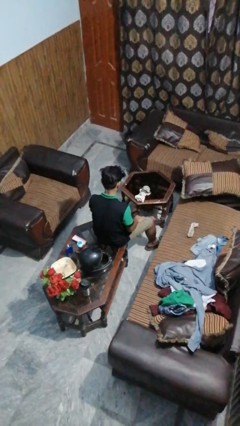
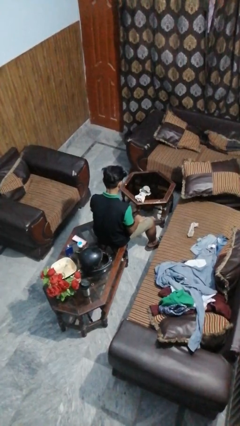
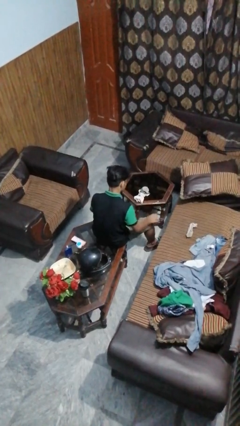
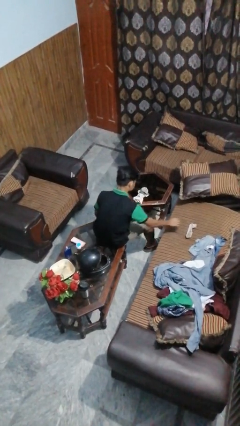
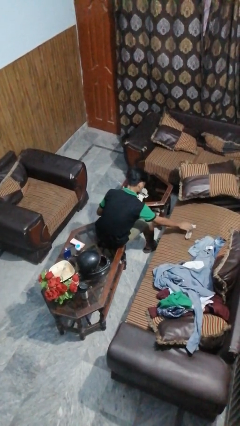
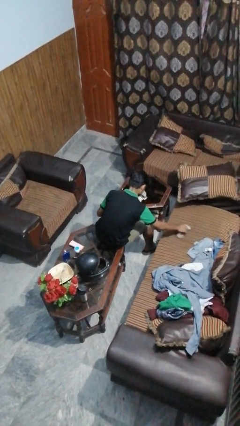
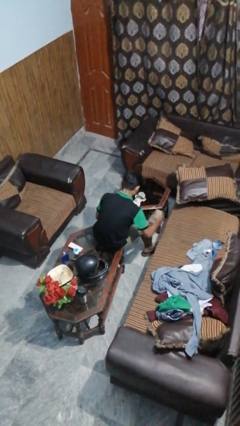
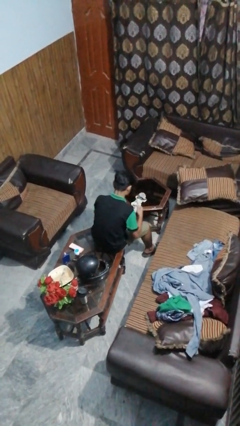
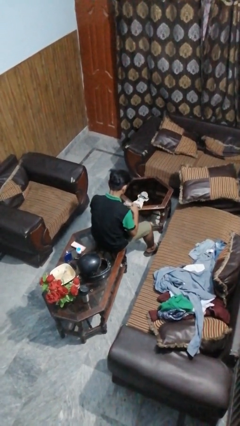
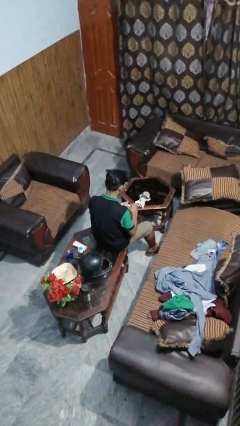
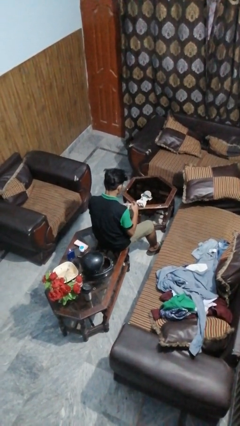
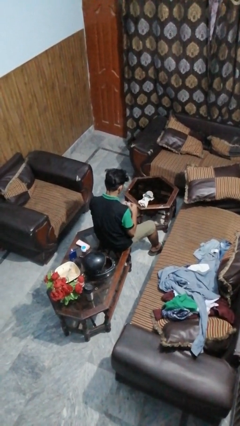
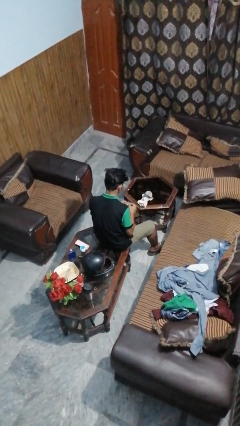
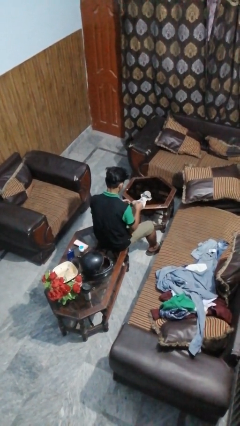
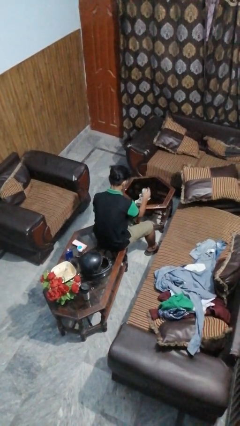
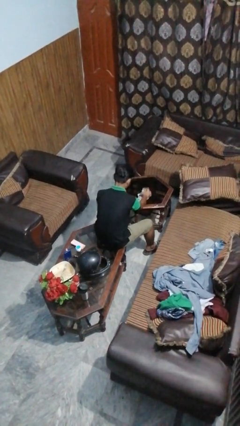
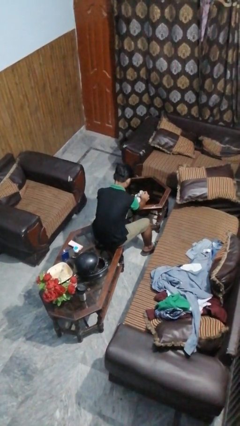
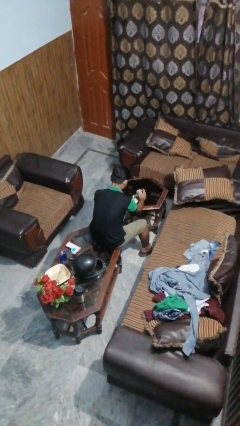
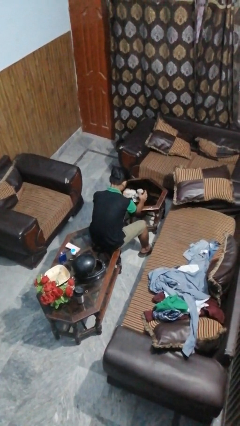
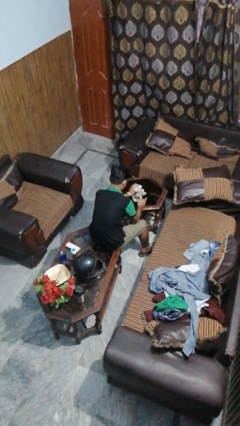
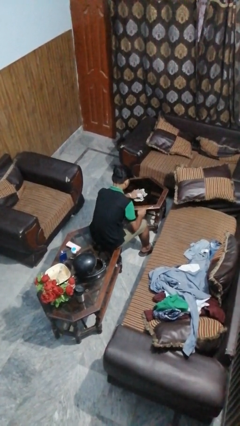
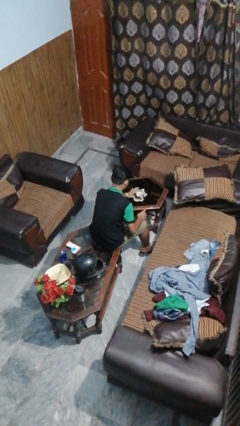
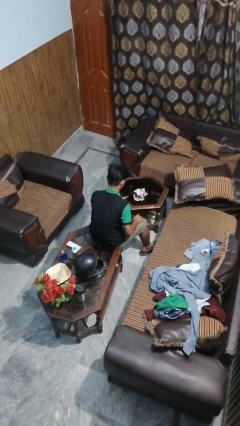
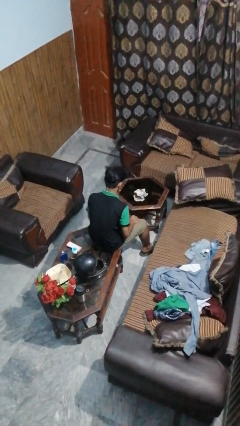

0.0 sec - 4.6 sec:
person folds socks

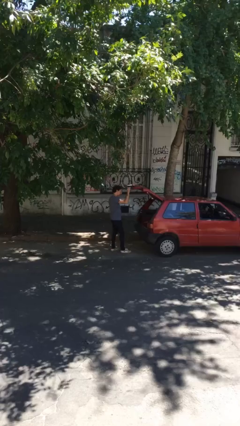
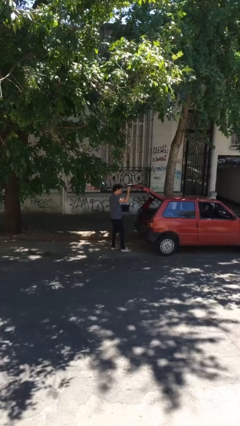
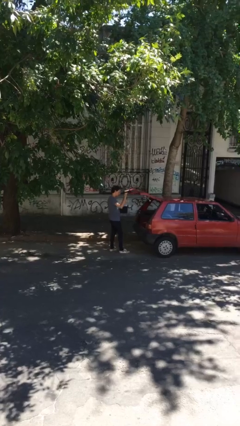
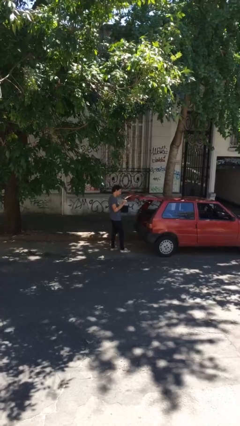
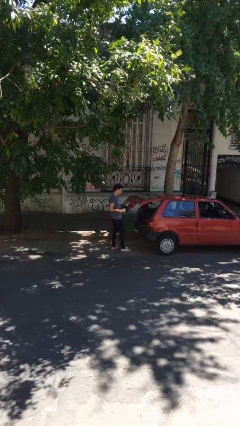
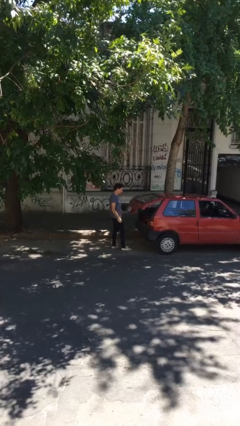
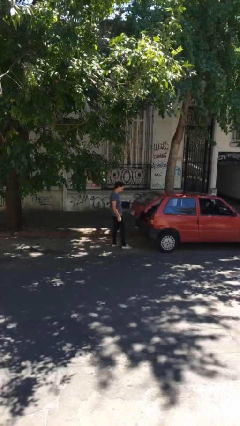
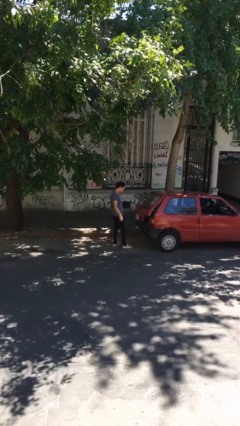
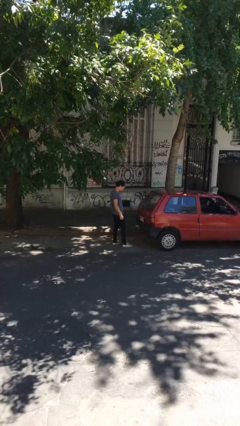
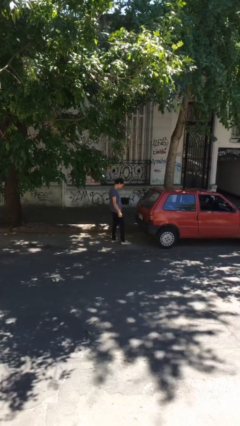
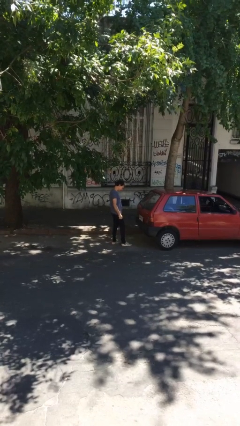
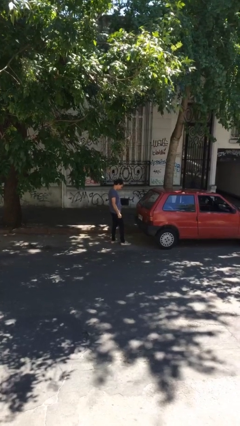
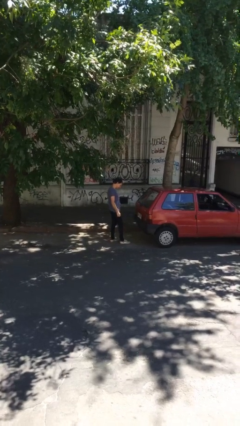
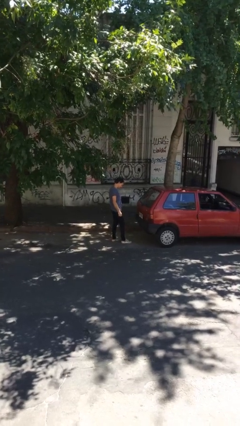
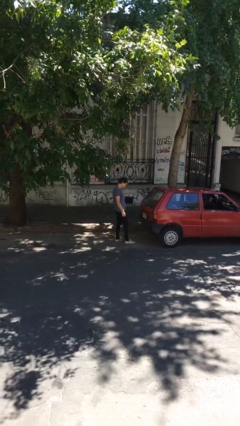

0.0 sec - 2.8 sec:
person closes car trunk

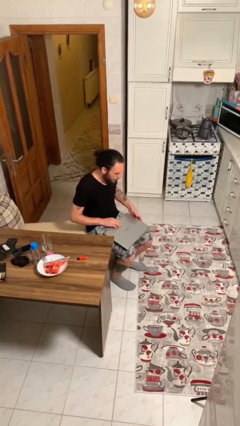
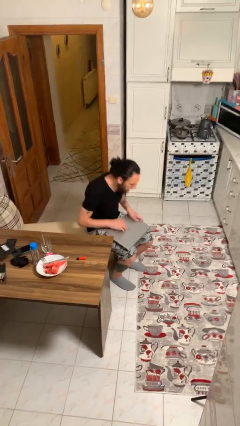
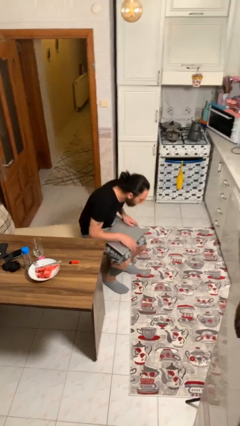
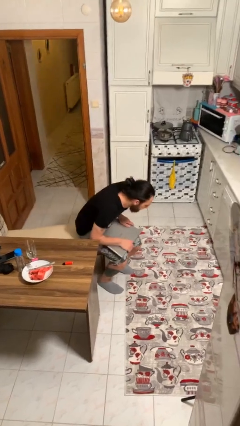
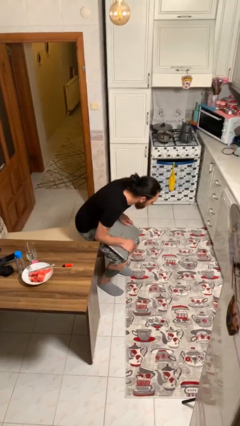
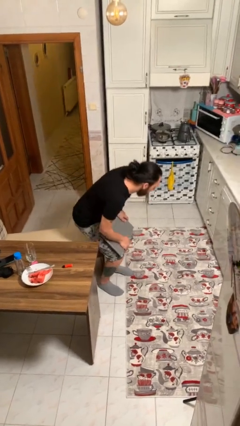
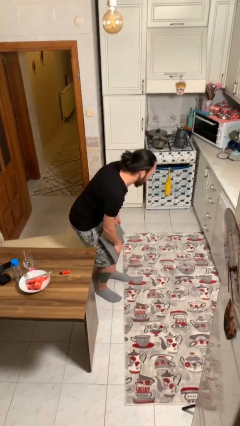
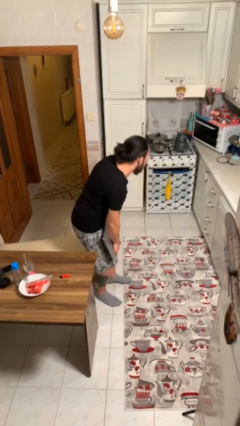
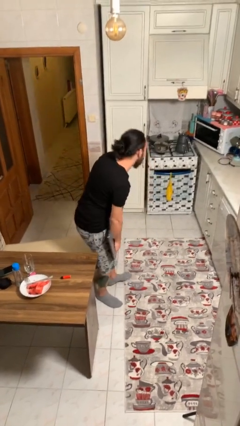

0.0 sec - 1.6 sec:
person stands up

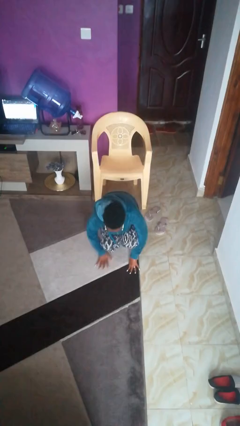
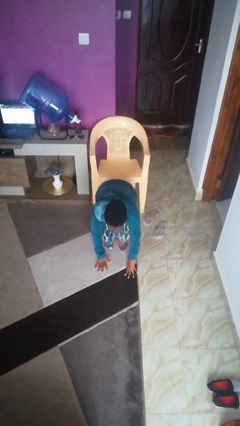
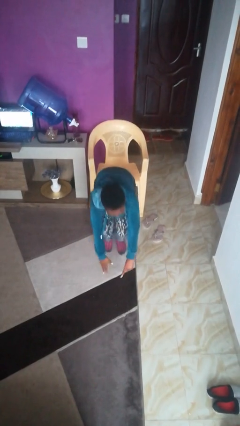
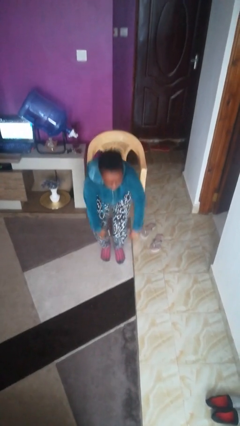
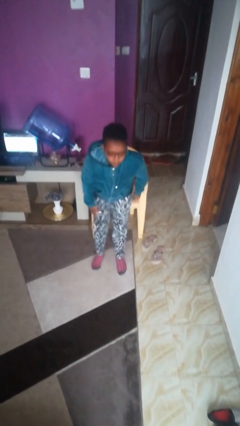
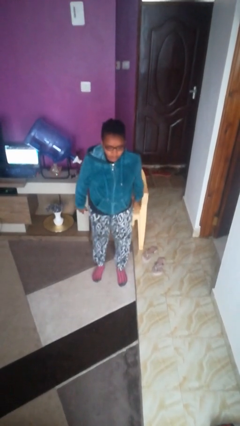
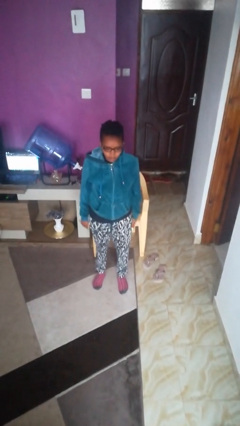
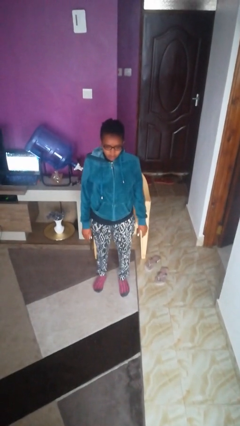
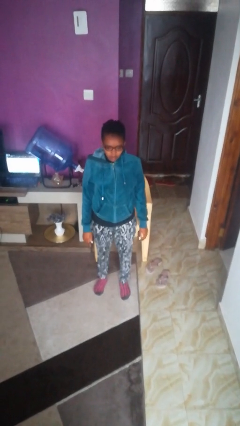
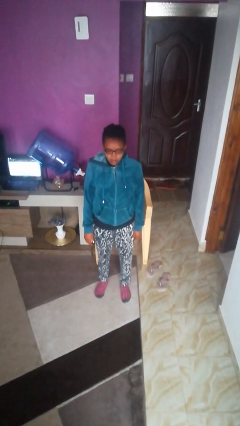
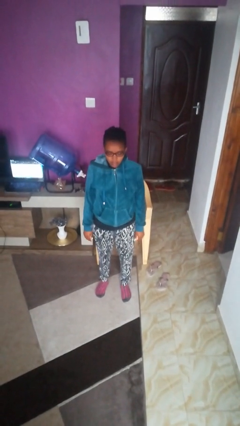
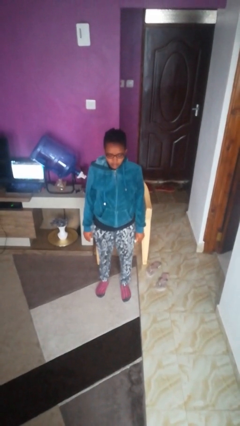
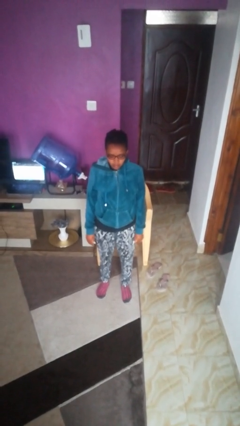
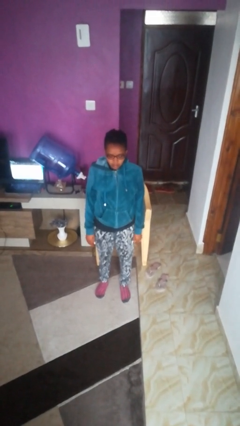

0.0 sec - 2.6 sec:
person stands up from floor

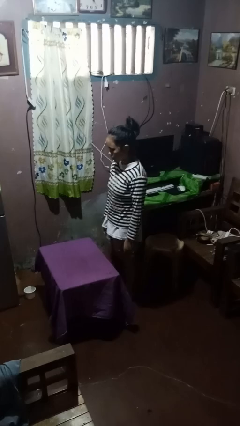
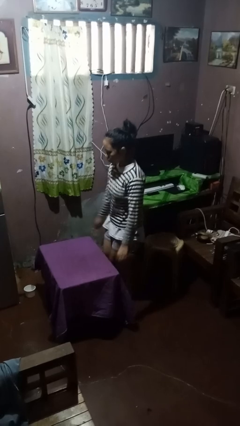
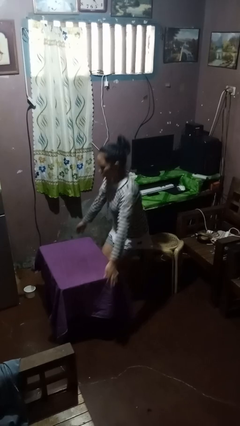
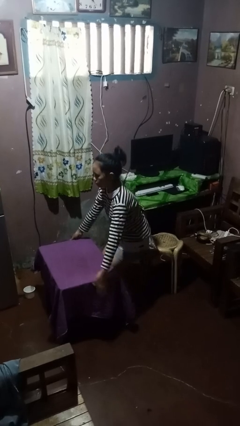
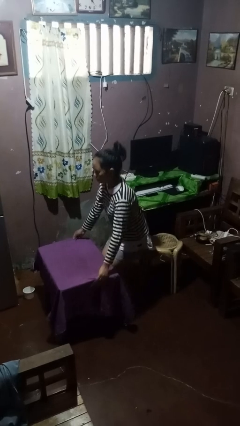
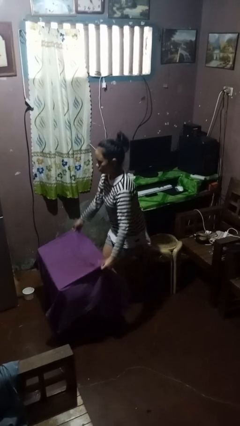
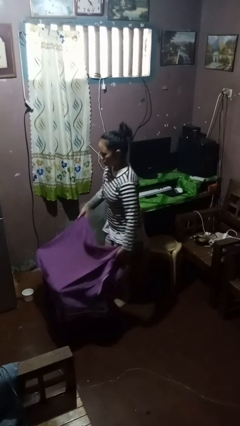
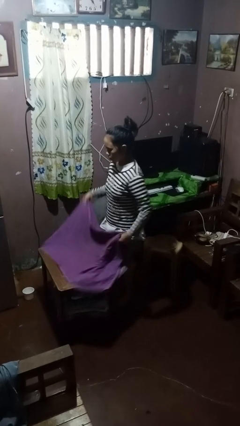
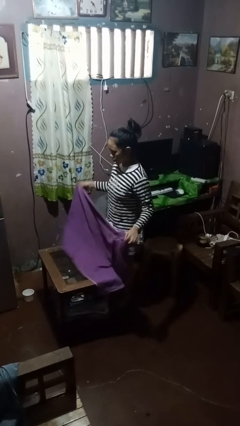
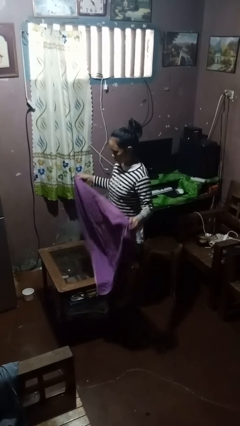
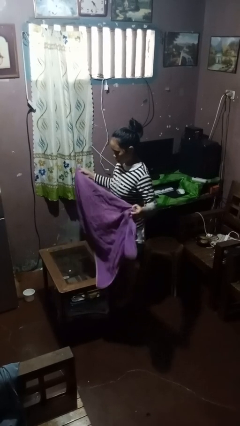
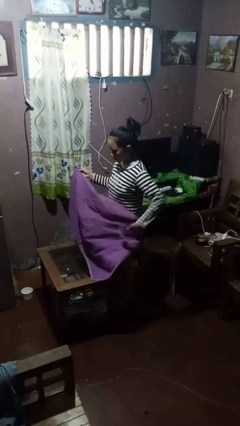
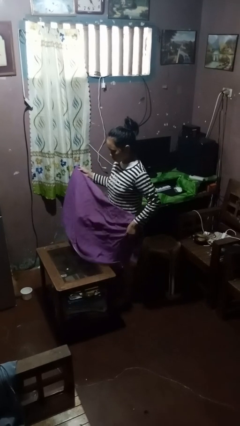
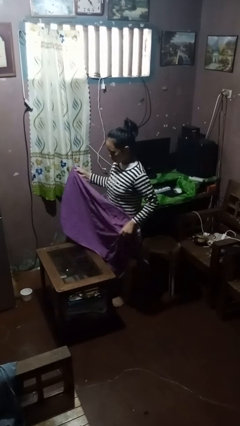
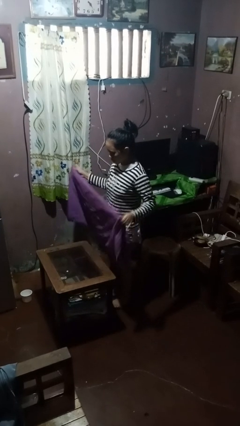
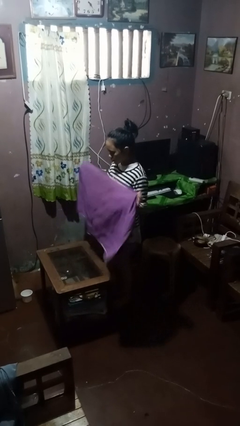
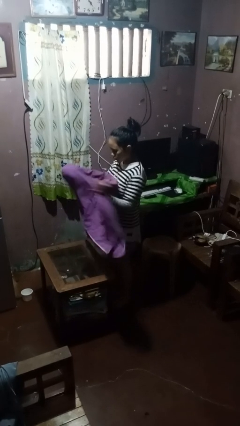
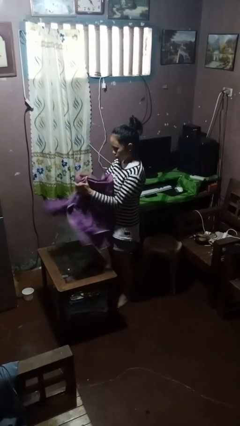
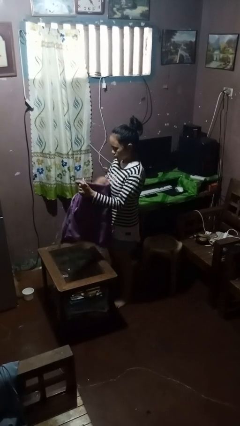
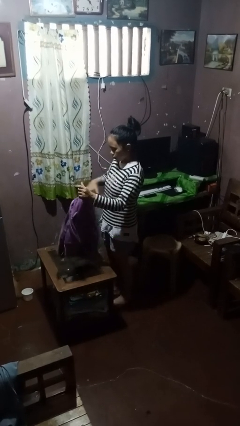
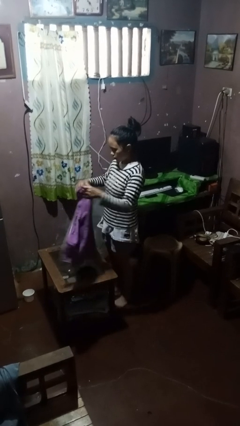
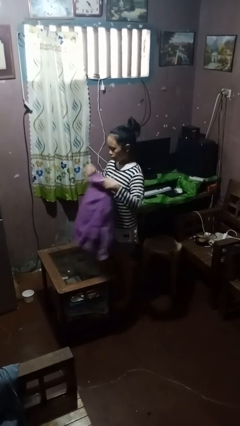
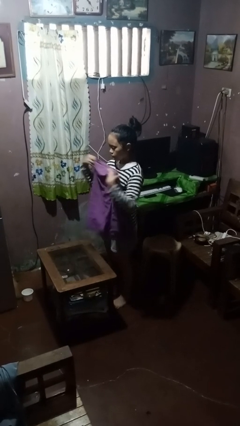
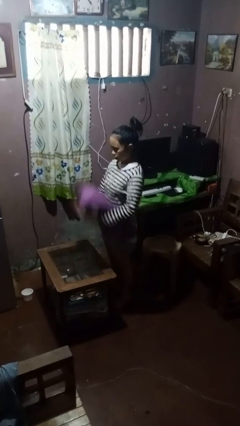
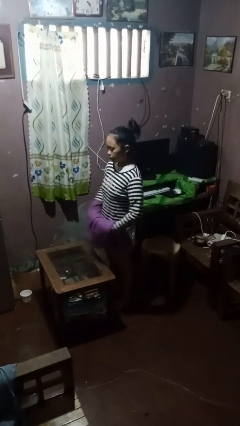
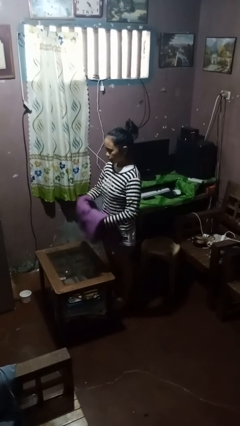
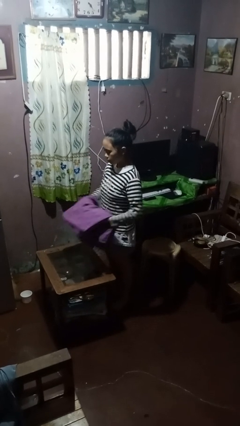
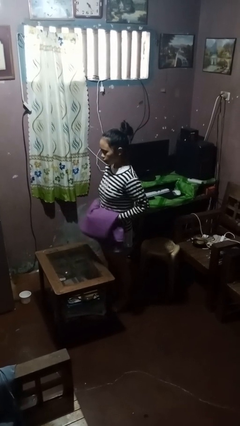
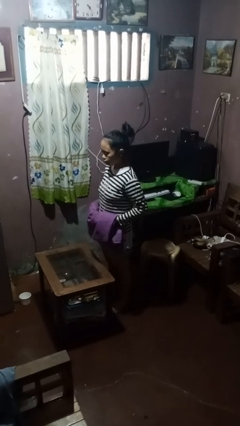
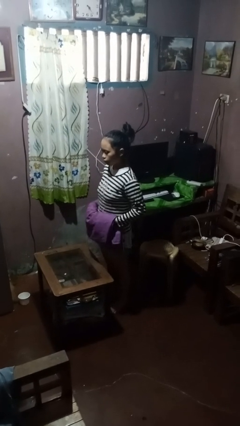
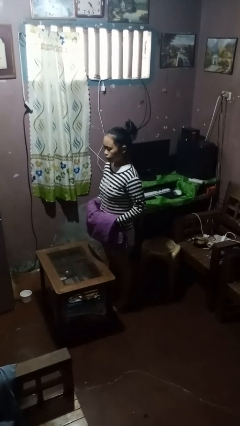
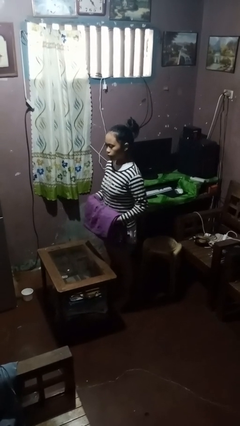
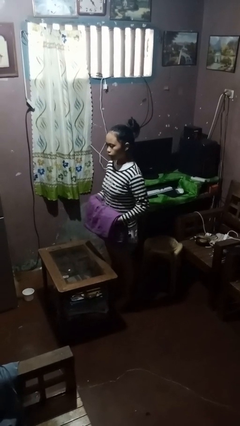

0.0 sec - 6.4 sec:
person folds tablecloth
